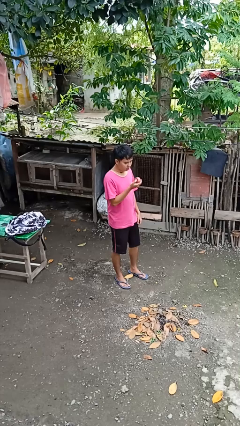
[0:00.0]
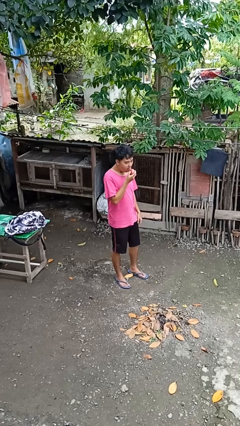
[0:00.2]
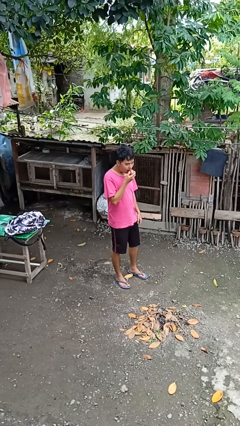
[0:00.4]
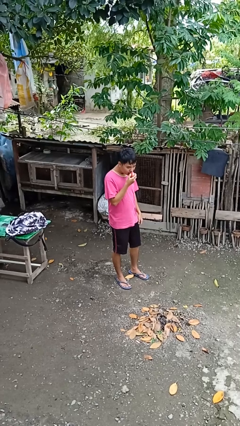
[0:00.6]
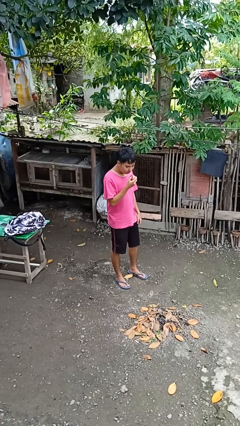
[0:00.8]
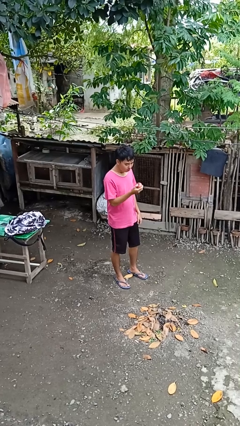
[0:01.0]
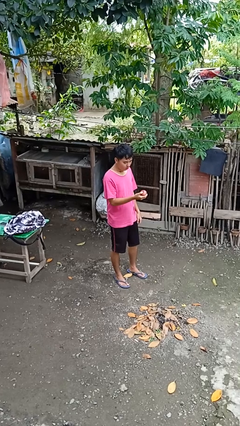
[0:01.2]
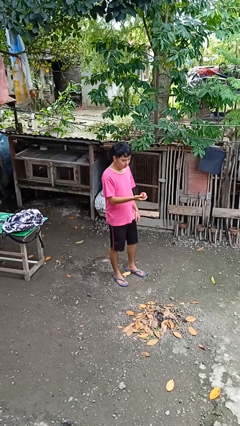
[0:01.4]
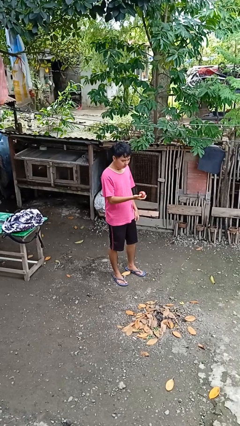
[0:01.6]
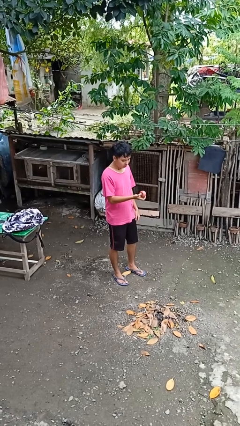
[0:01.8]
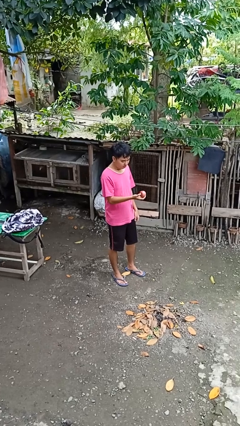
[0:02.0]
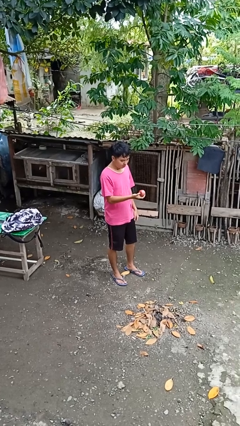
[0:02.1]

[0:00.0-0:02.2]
person eats apple

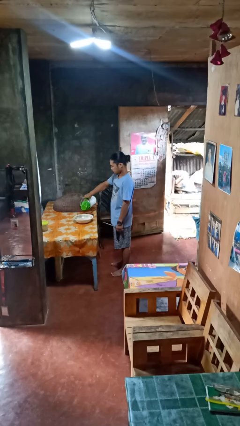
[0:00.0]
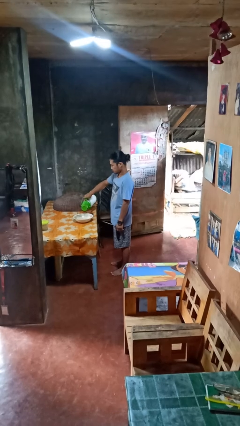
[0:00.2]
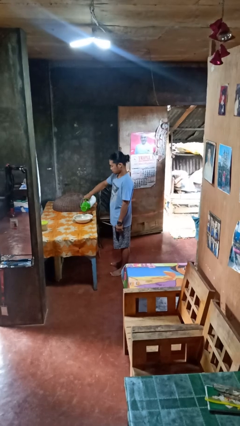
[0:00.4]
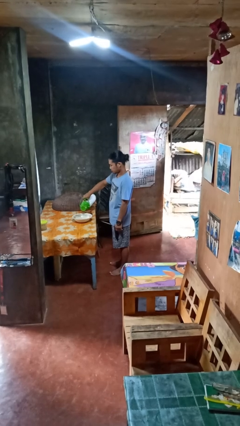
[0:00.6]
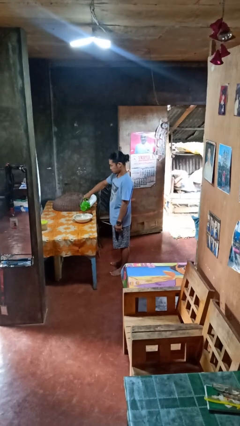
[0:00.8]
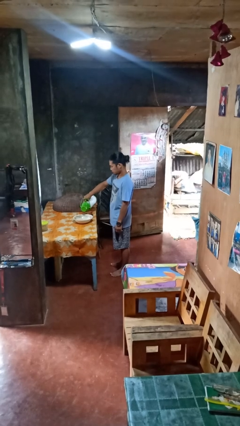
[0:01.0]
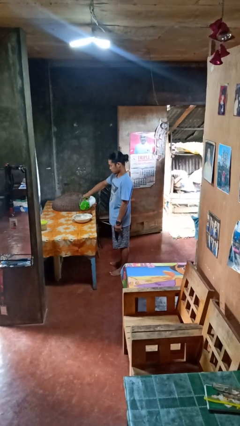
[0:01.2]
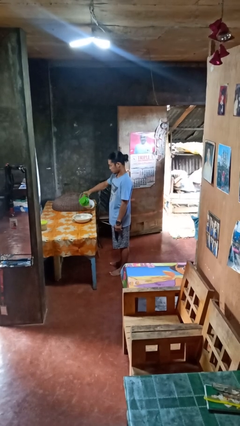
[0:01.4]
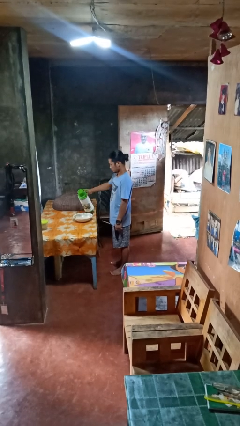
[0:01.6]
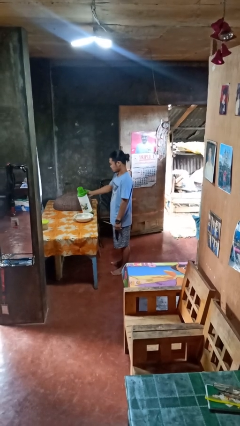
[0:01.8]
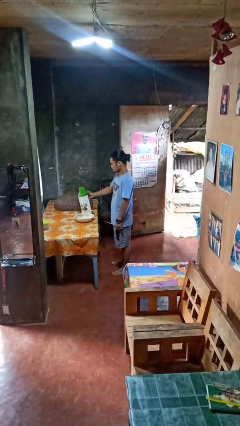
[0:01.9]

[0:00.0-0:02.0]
person pours into bowl

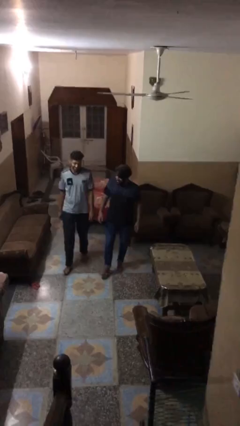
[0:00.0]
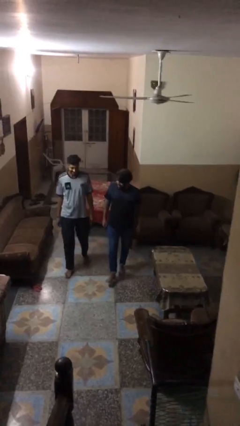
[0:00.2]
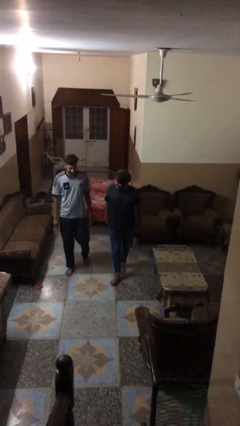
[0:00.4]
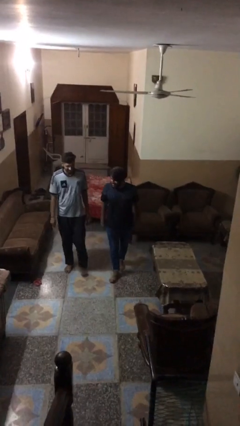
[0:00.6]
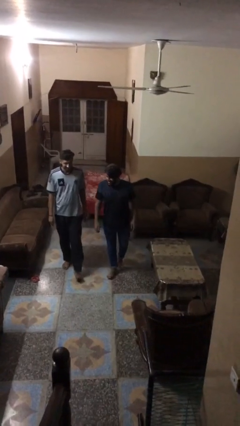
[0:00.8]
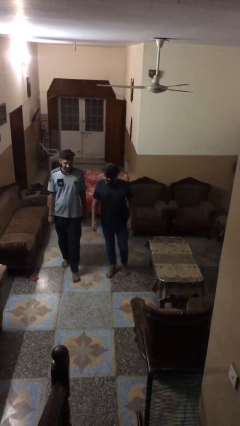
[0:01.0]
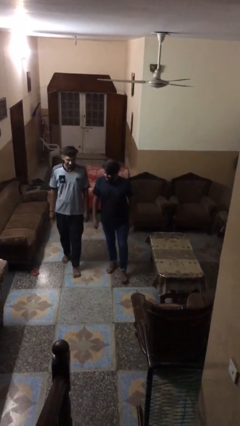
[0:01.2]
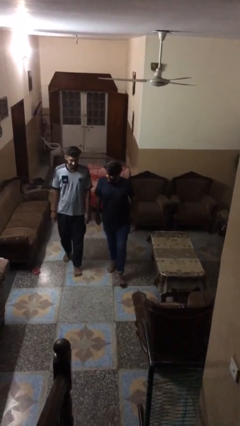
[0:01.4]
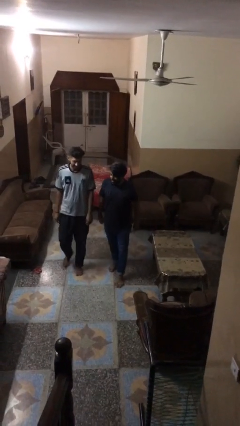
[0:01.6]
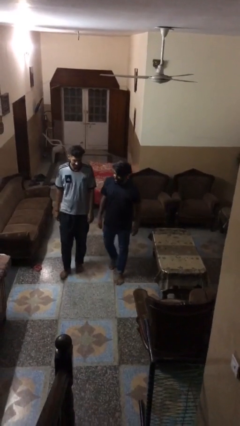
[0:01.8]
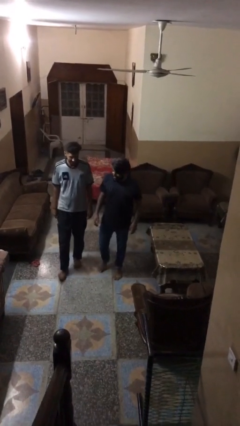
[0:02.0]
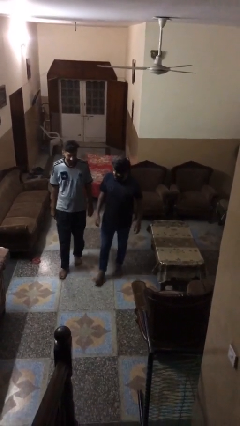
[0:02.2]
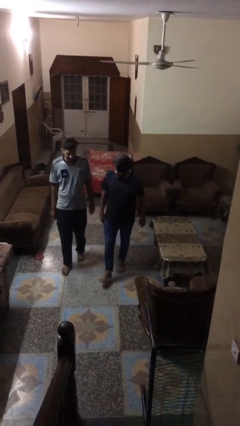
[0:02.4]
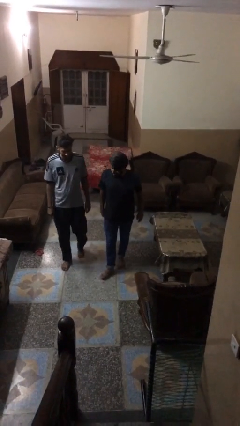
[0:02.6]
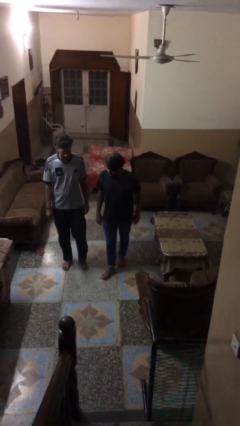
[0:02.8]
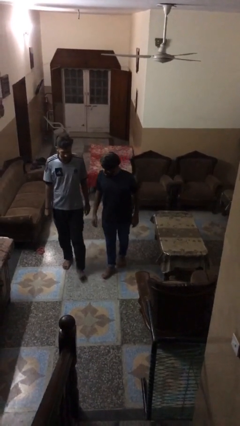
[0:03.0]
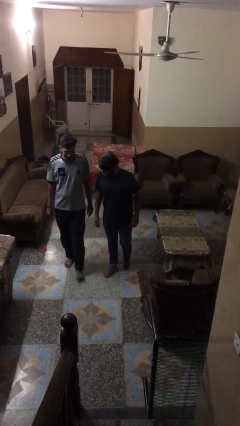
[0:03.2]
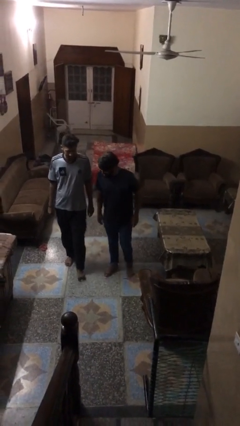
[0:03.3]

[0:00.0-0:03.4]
person talks to person

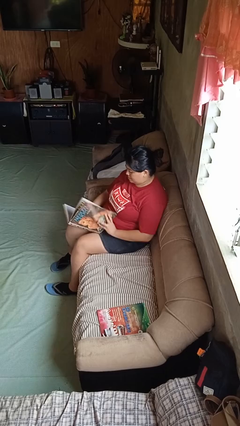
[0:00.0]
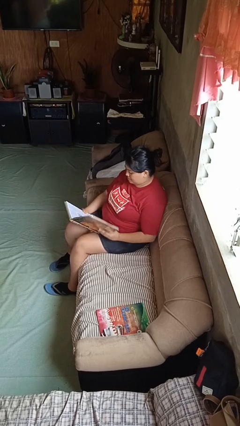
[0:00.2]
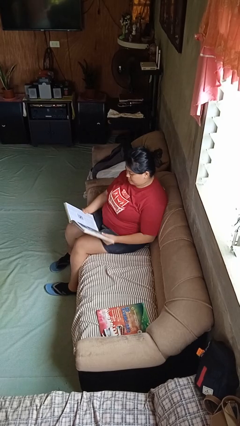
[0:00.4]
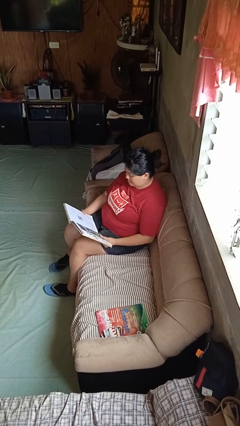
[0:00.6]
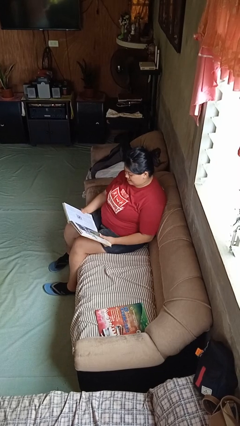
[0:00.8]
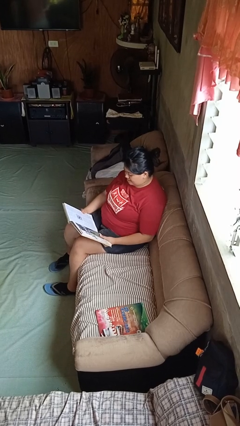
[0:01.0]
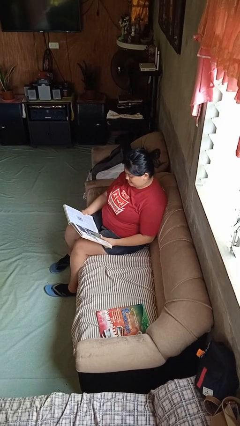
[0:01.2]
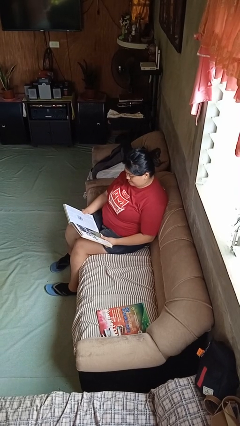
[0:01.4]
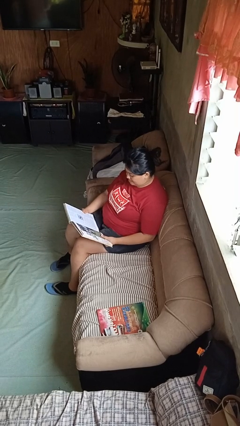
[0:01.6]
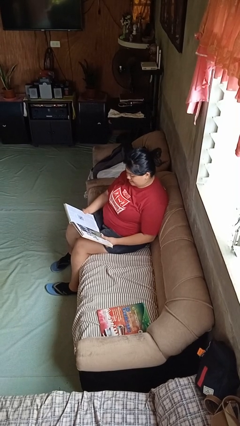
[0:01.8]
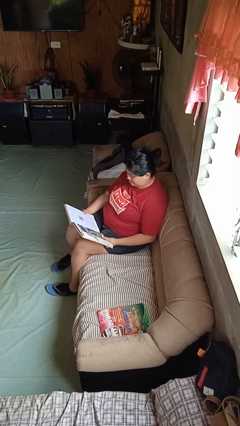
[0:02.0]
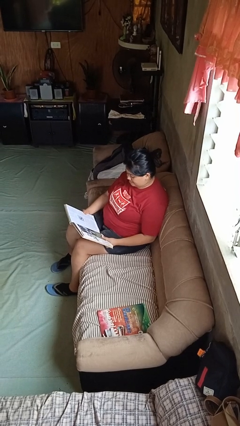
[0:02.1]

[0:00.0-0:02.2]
person reads book

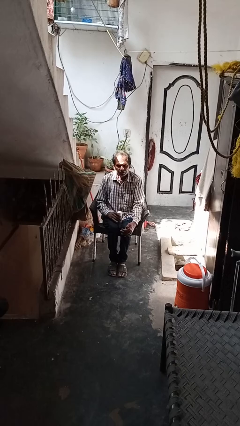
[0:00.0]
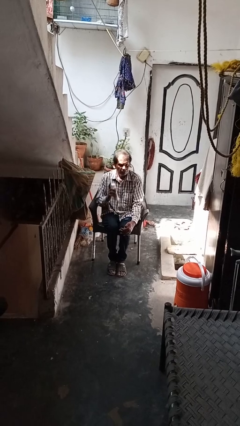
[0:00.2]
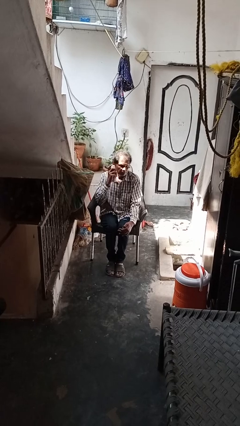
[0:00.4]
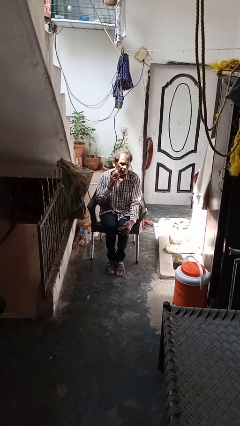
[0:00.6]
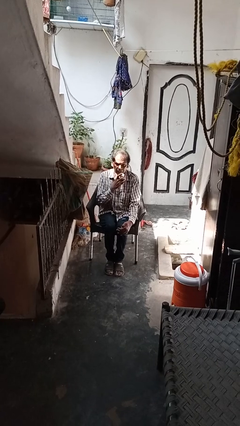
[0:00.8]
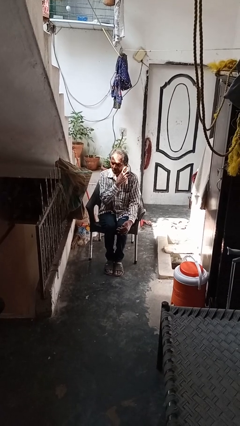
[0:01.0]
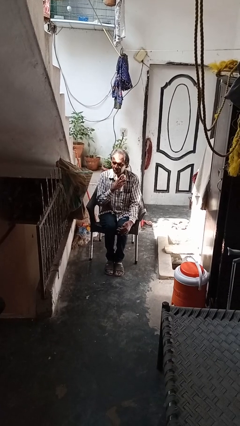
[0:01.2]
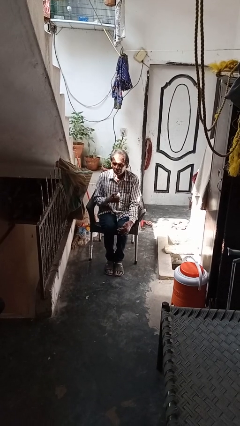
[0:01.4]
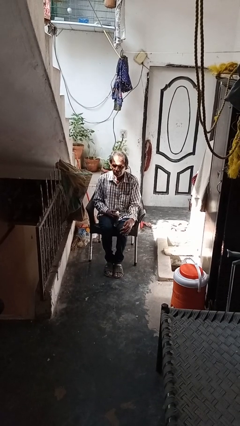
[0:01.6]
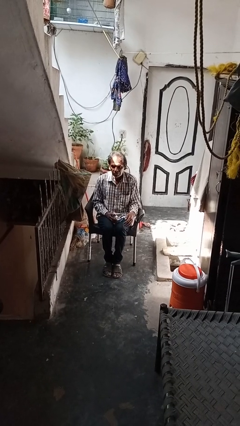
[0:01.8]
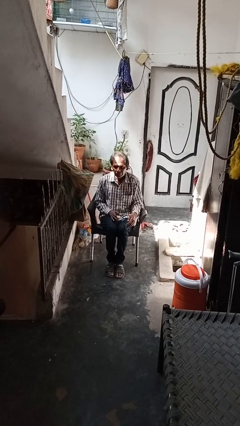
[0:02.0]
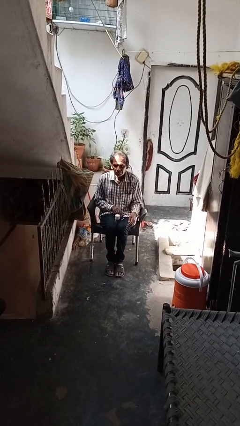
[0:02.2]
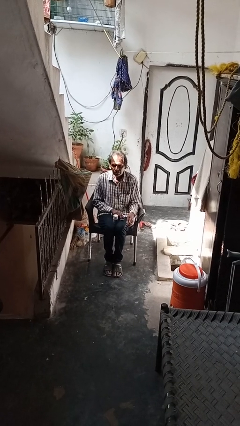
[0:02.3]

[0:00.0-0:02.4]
person applies shaving cream

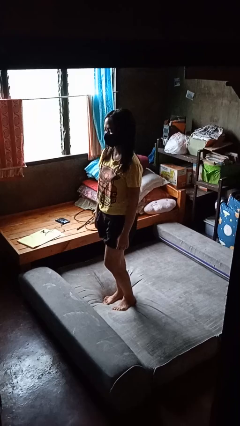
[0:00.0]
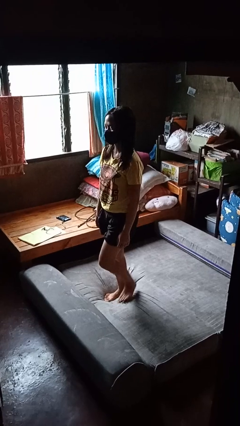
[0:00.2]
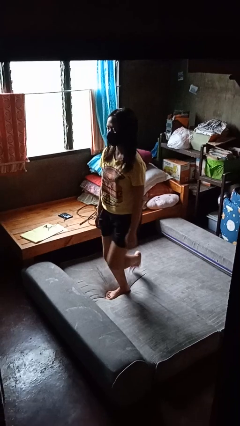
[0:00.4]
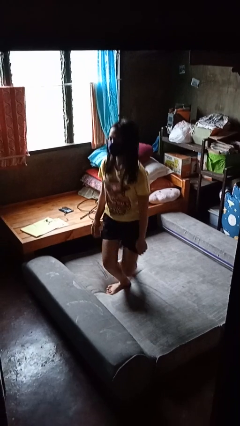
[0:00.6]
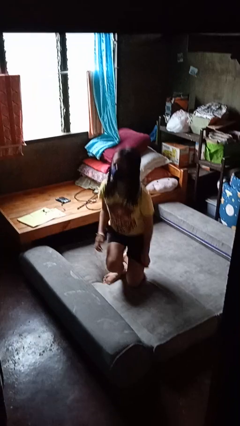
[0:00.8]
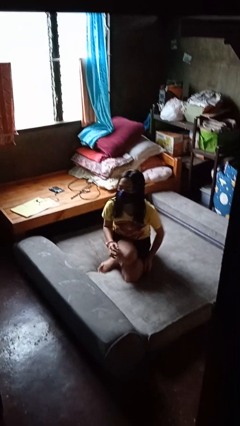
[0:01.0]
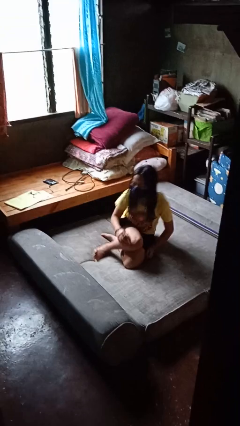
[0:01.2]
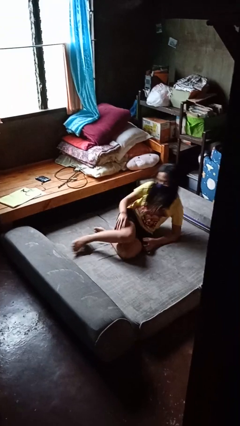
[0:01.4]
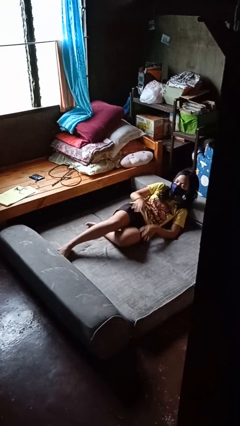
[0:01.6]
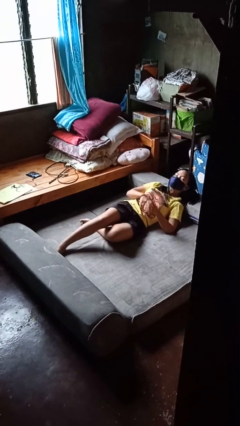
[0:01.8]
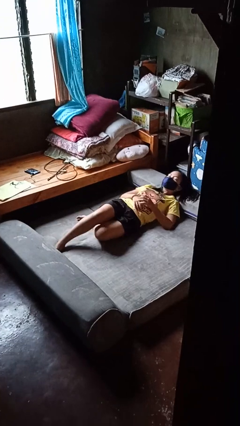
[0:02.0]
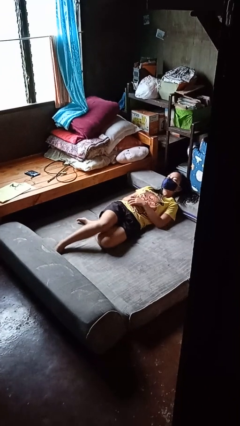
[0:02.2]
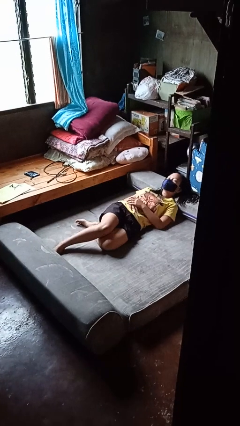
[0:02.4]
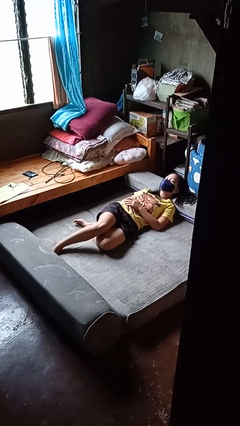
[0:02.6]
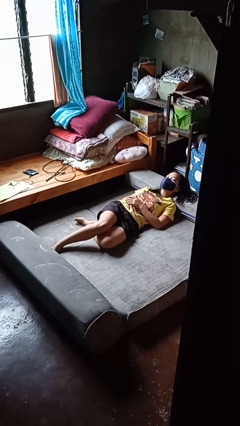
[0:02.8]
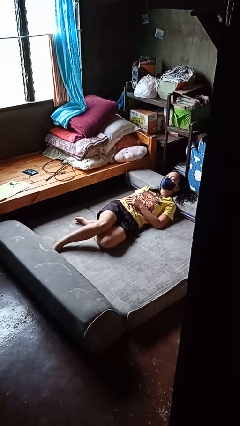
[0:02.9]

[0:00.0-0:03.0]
person lies down on bed

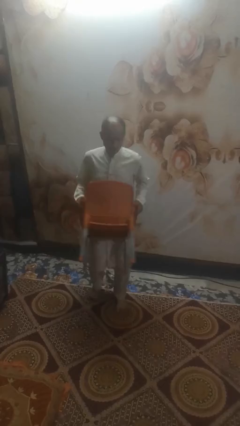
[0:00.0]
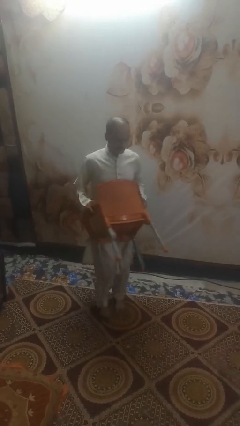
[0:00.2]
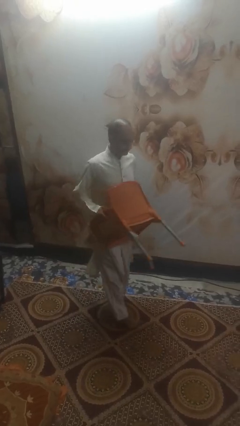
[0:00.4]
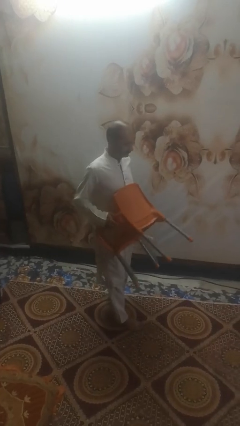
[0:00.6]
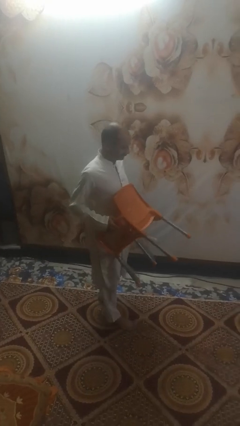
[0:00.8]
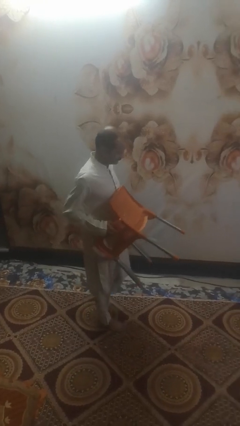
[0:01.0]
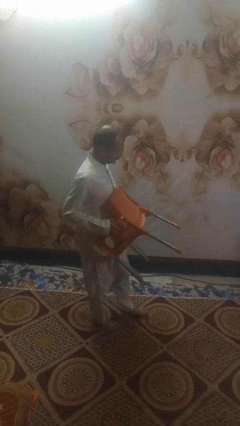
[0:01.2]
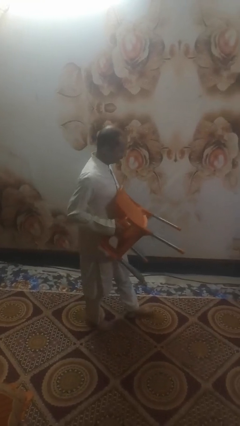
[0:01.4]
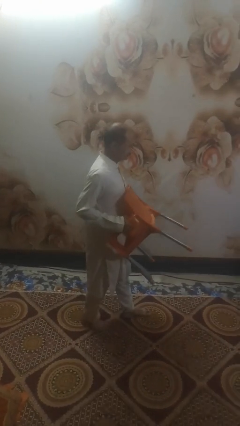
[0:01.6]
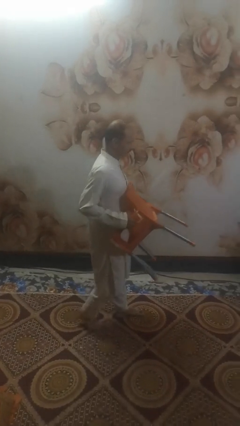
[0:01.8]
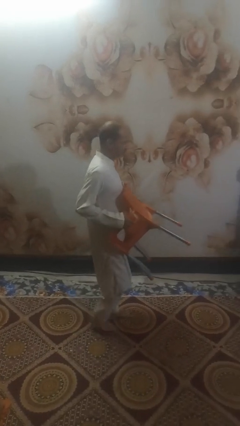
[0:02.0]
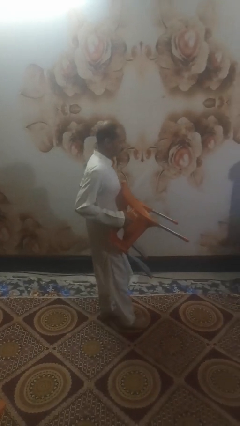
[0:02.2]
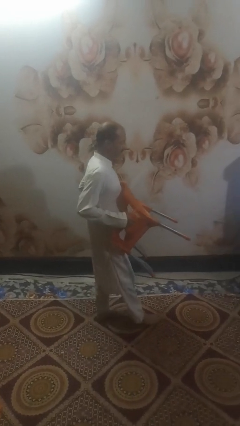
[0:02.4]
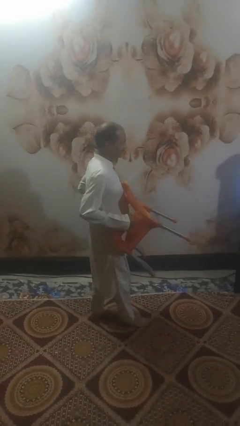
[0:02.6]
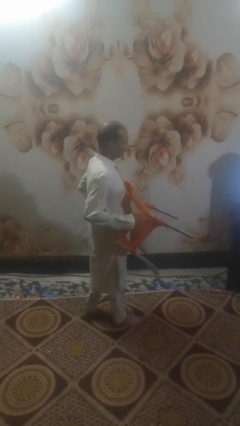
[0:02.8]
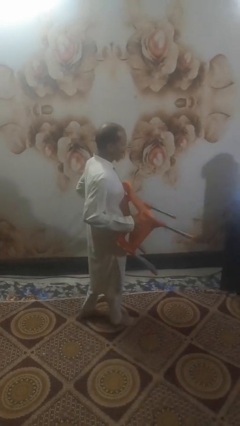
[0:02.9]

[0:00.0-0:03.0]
person carries furniture
